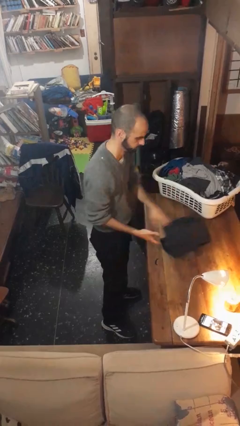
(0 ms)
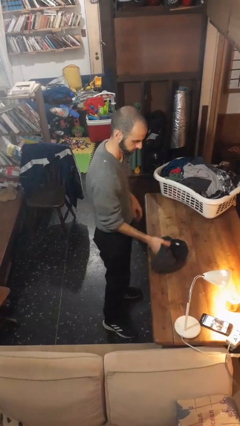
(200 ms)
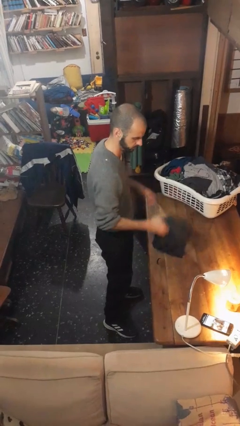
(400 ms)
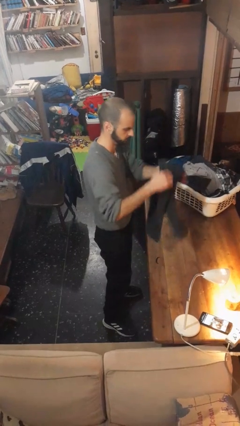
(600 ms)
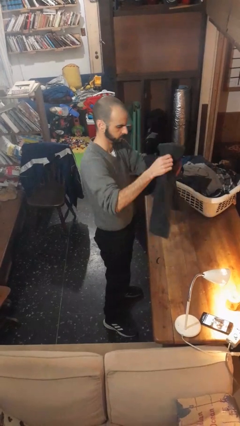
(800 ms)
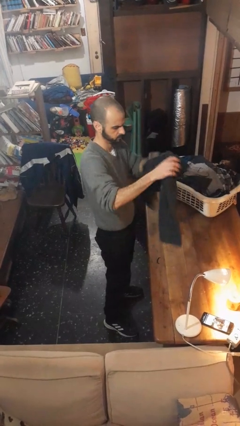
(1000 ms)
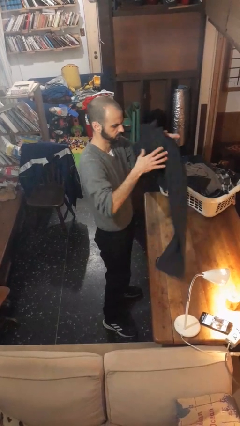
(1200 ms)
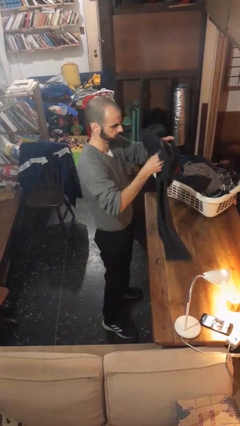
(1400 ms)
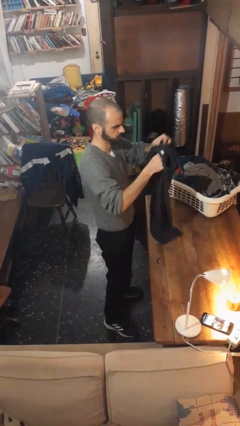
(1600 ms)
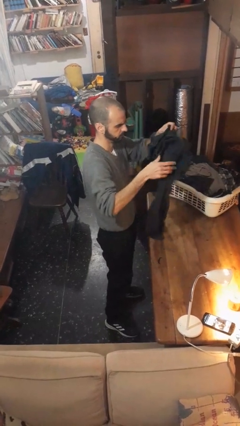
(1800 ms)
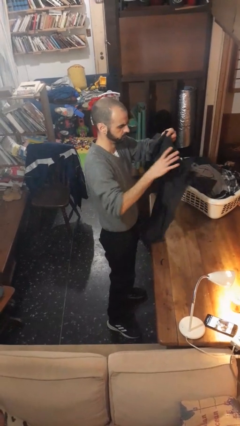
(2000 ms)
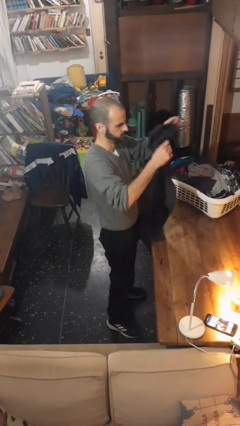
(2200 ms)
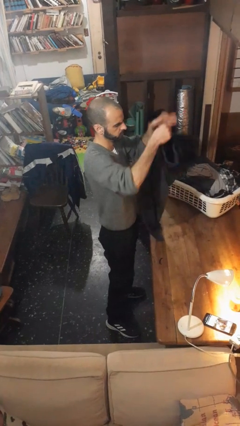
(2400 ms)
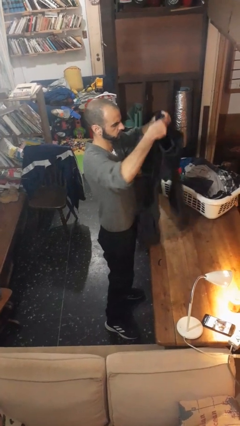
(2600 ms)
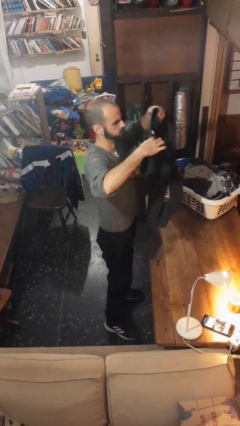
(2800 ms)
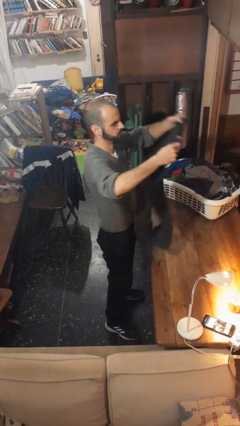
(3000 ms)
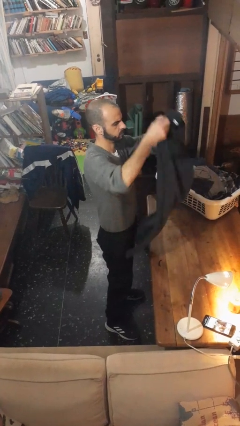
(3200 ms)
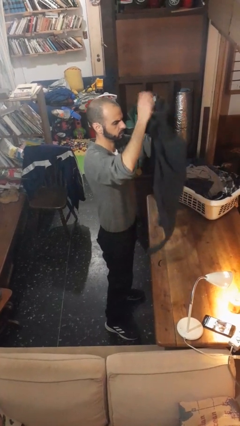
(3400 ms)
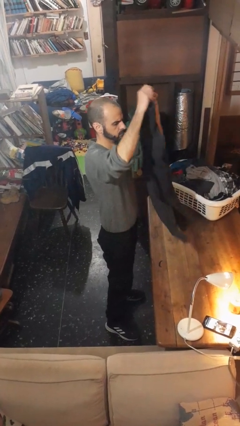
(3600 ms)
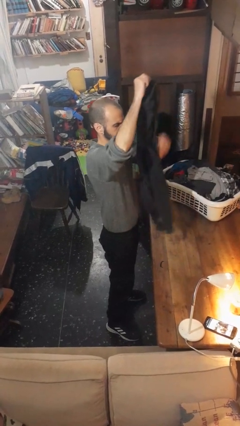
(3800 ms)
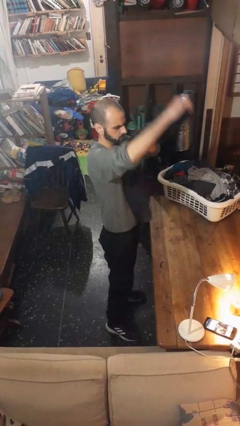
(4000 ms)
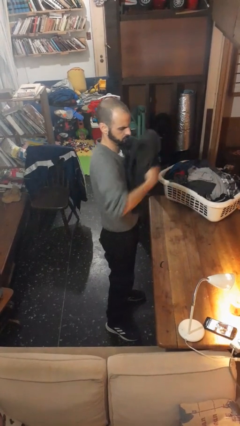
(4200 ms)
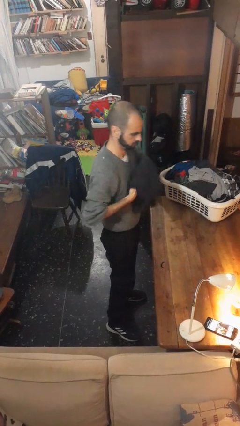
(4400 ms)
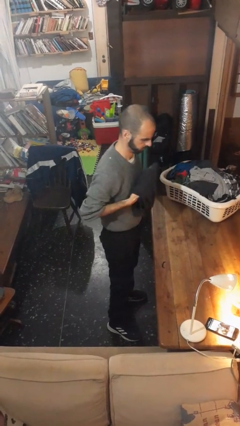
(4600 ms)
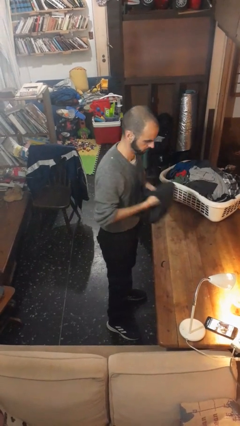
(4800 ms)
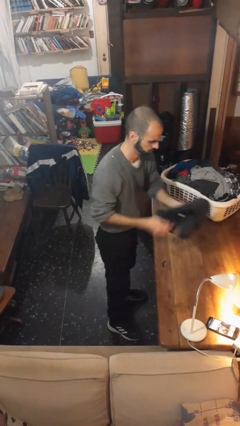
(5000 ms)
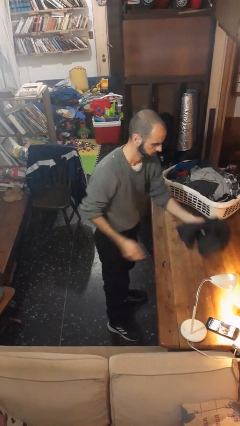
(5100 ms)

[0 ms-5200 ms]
person folds pants

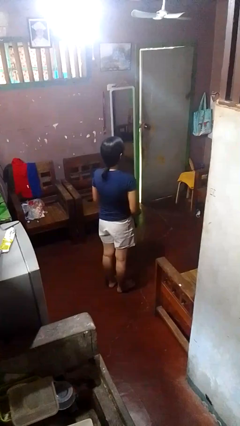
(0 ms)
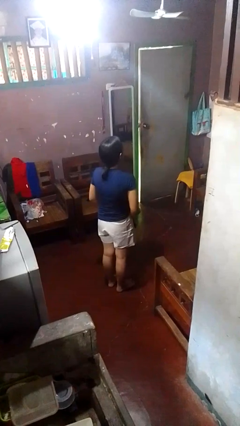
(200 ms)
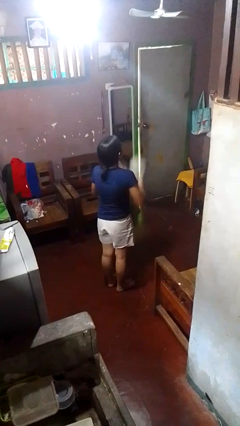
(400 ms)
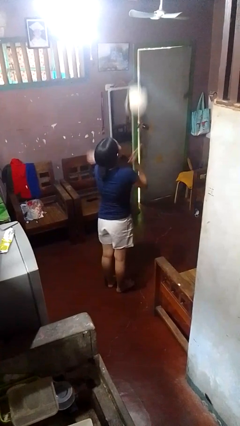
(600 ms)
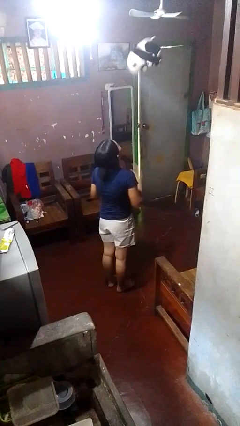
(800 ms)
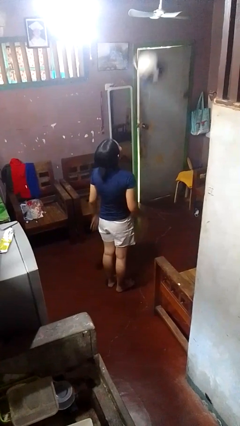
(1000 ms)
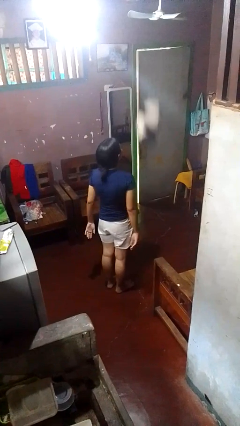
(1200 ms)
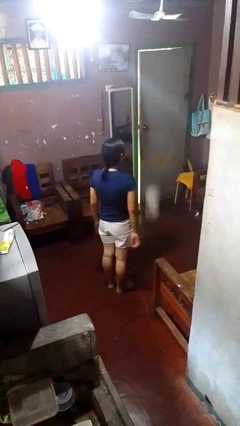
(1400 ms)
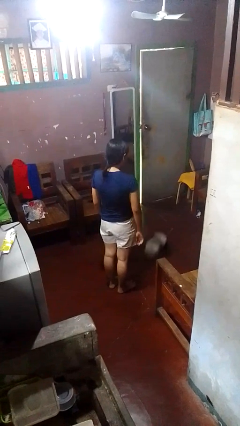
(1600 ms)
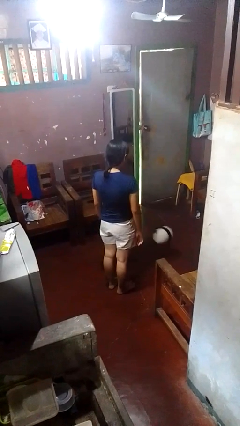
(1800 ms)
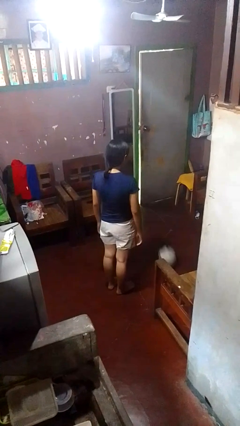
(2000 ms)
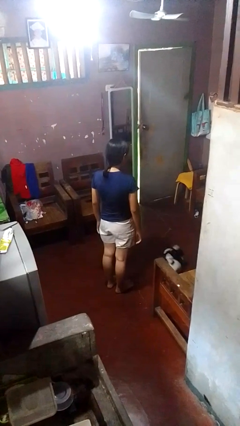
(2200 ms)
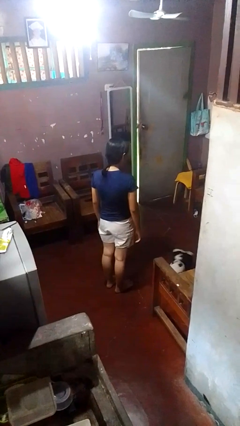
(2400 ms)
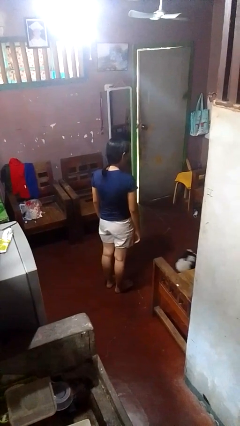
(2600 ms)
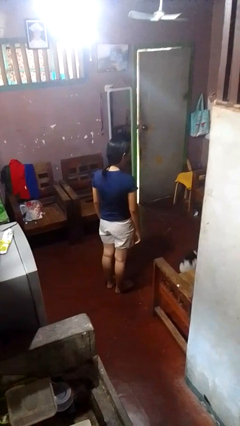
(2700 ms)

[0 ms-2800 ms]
person throws object into air

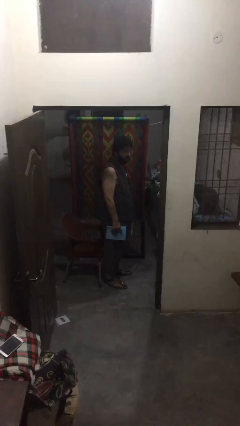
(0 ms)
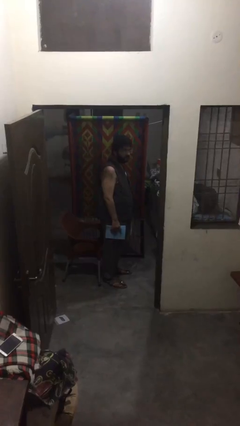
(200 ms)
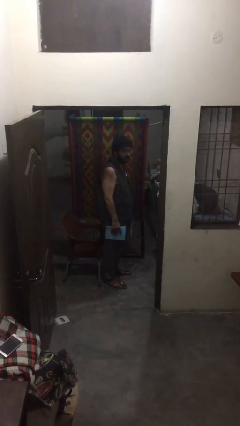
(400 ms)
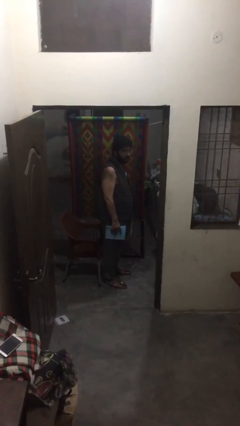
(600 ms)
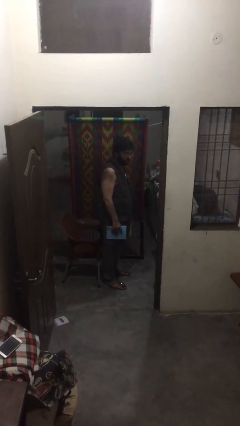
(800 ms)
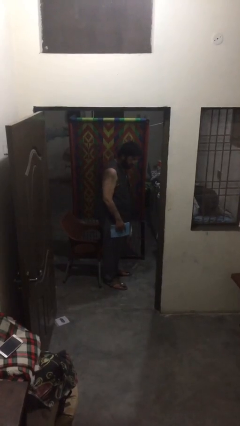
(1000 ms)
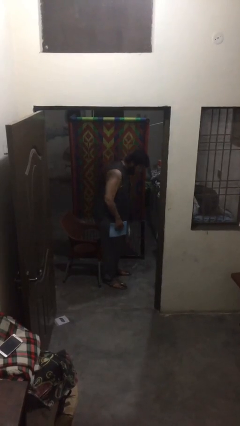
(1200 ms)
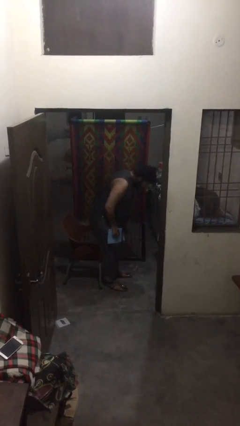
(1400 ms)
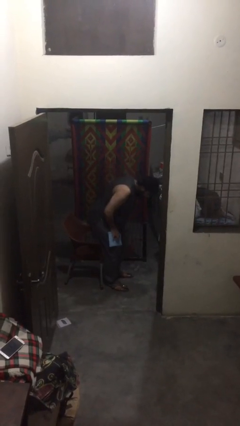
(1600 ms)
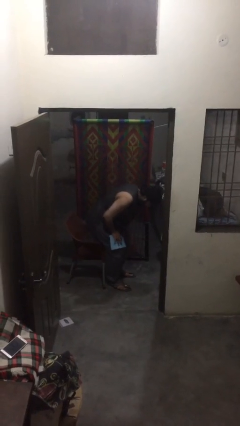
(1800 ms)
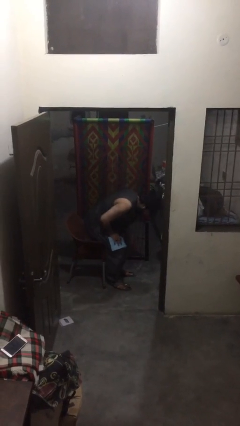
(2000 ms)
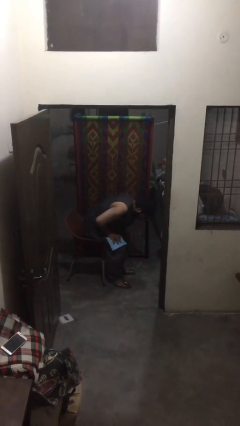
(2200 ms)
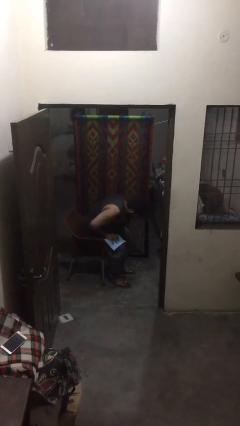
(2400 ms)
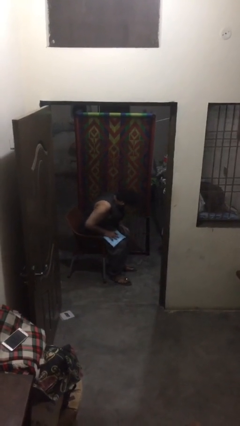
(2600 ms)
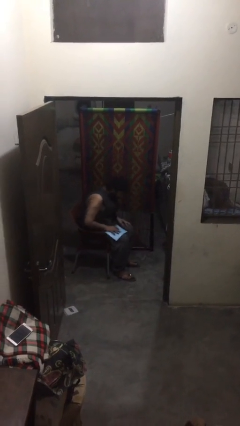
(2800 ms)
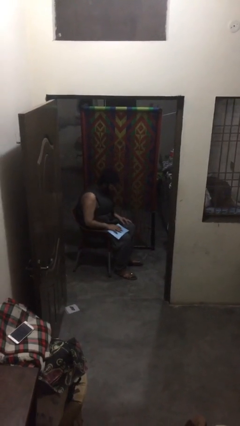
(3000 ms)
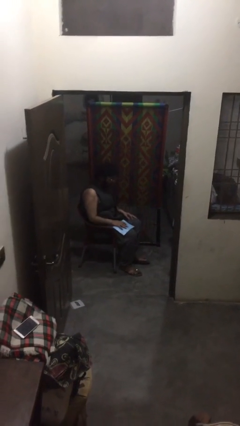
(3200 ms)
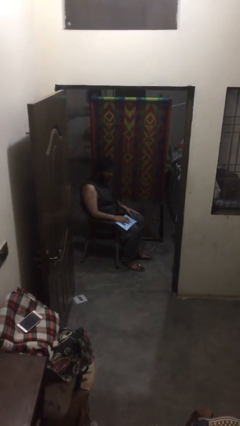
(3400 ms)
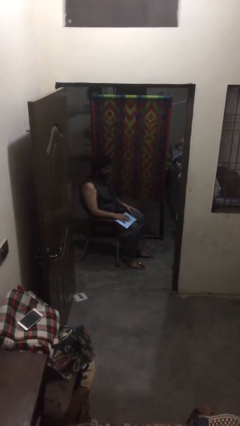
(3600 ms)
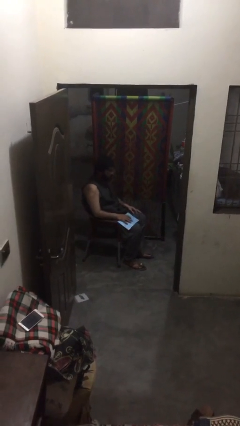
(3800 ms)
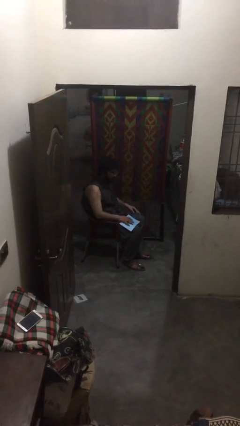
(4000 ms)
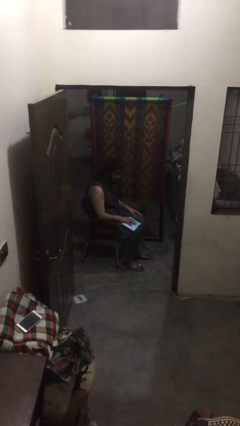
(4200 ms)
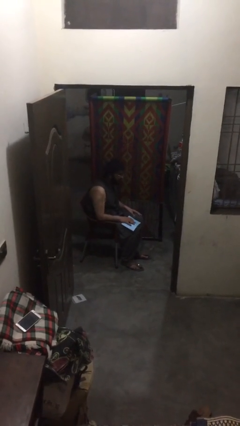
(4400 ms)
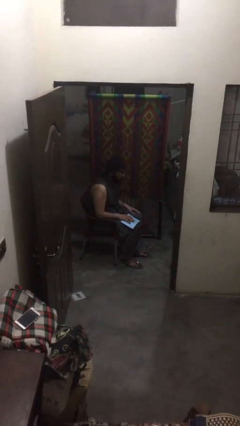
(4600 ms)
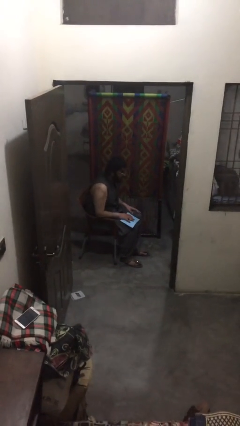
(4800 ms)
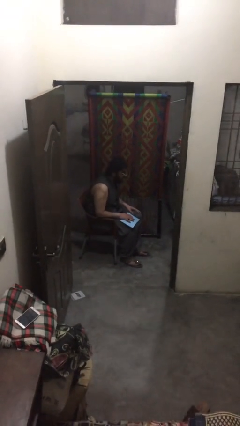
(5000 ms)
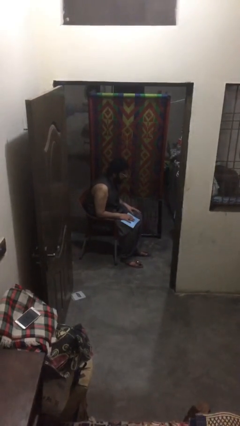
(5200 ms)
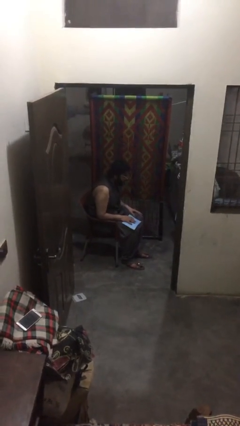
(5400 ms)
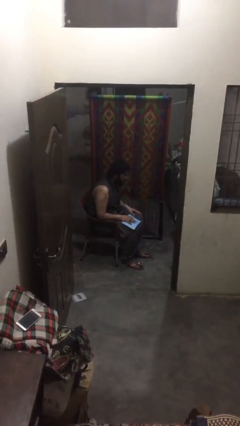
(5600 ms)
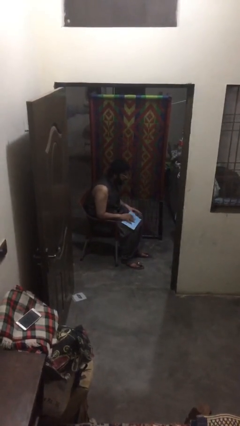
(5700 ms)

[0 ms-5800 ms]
person sits down

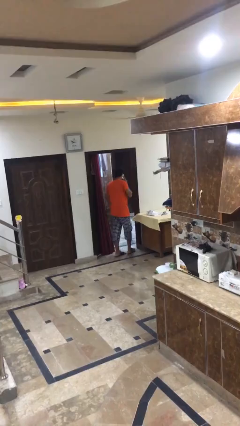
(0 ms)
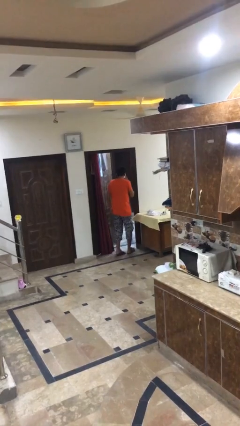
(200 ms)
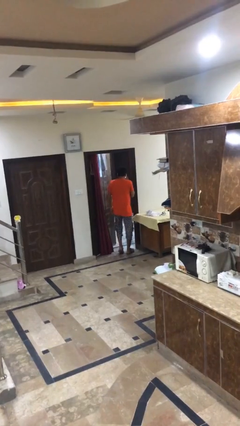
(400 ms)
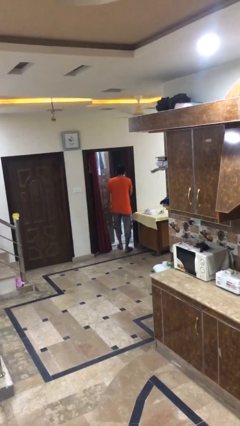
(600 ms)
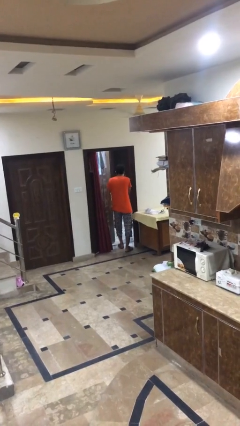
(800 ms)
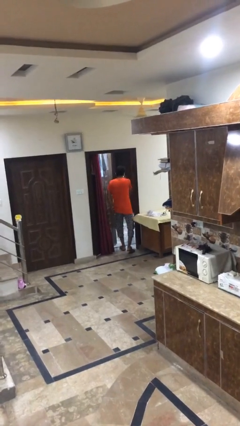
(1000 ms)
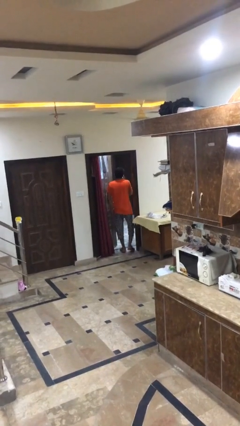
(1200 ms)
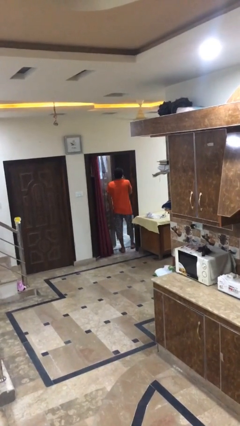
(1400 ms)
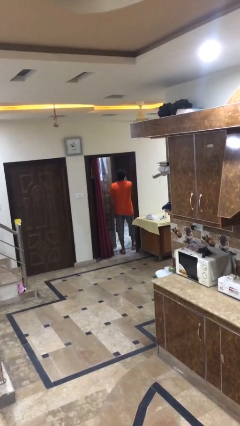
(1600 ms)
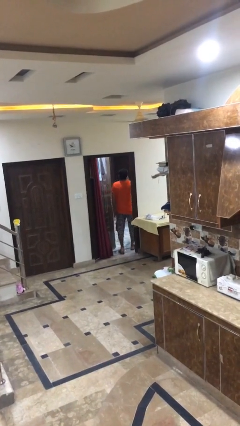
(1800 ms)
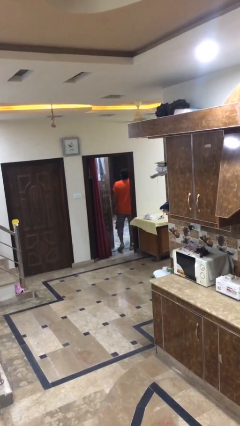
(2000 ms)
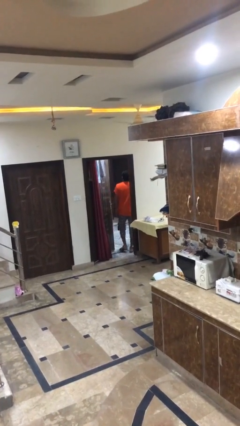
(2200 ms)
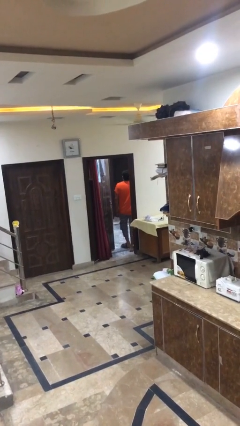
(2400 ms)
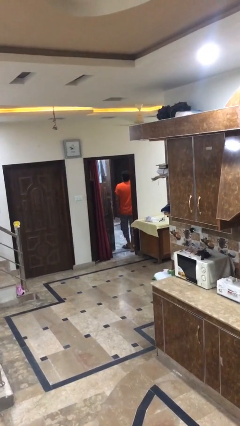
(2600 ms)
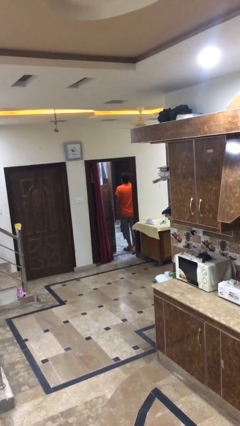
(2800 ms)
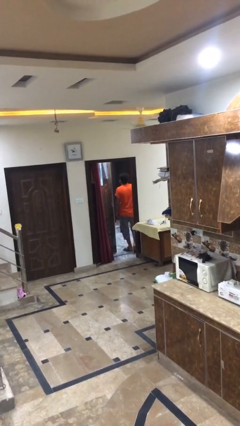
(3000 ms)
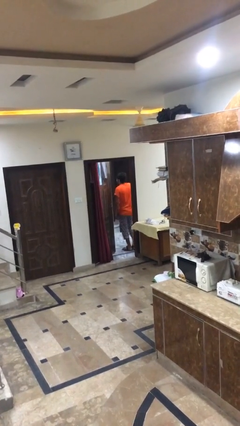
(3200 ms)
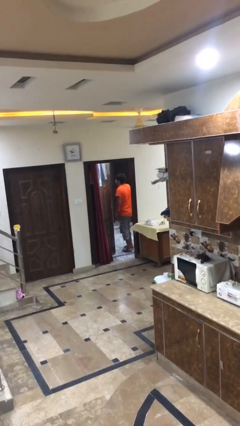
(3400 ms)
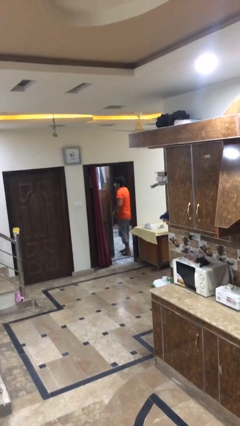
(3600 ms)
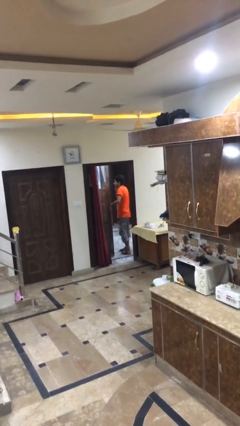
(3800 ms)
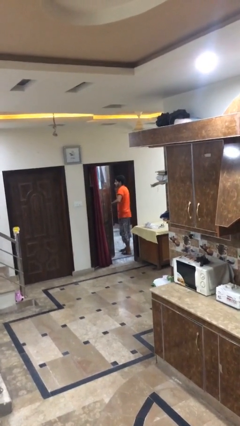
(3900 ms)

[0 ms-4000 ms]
person exits scene through structure

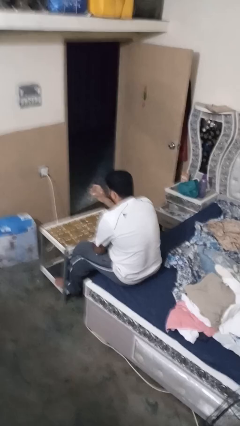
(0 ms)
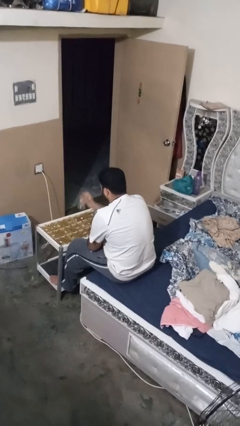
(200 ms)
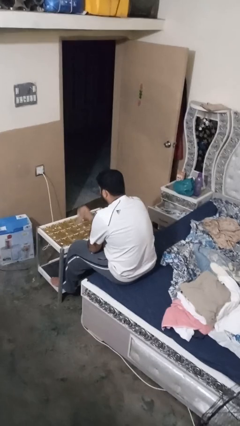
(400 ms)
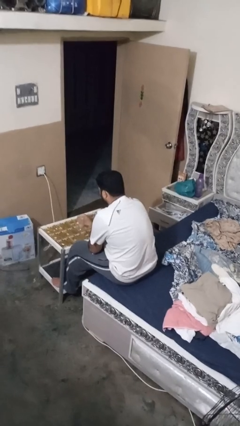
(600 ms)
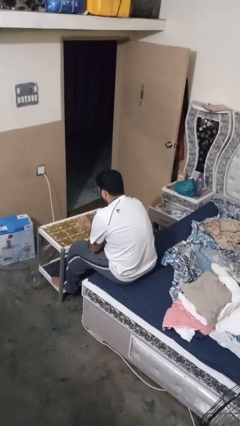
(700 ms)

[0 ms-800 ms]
person puts down object on table
